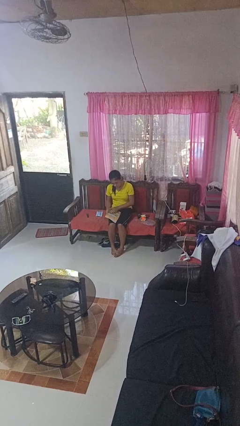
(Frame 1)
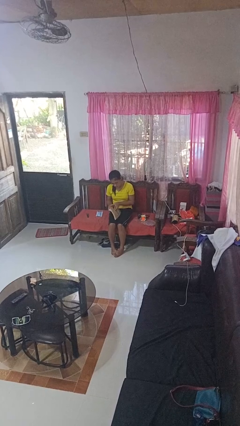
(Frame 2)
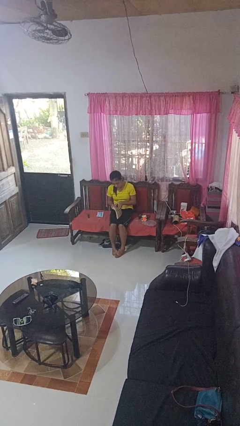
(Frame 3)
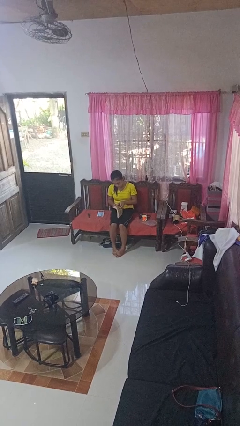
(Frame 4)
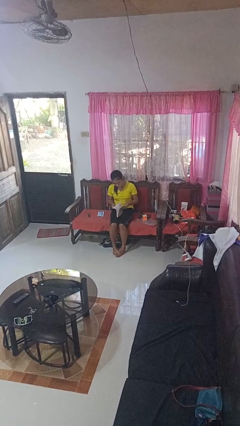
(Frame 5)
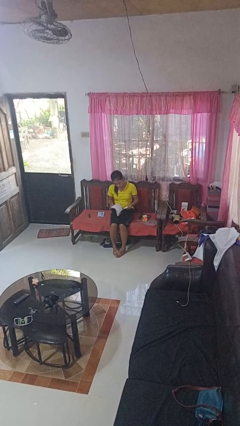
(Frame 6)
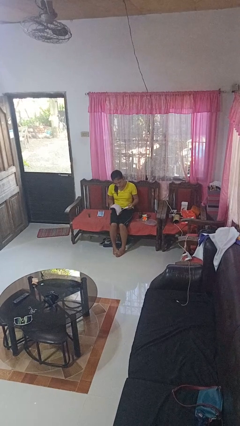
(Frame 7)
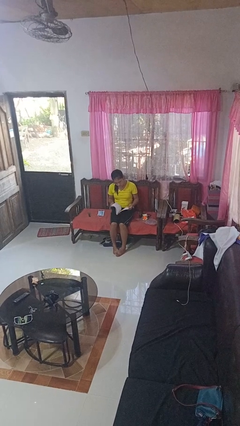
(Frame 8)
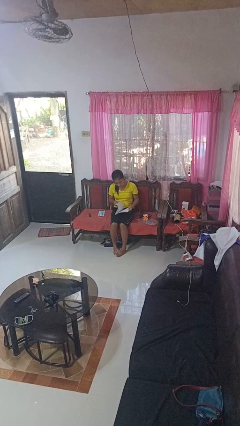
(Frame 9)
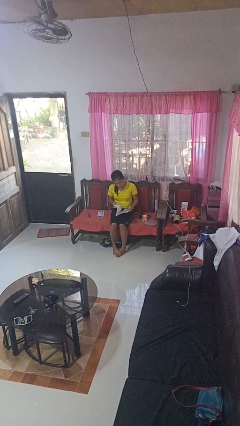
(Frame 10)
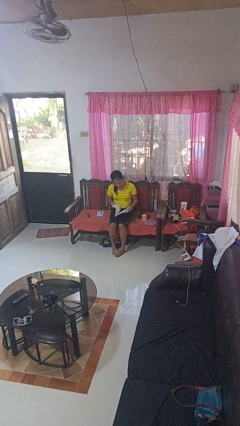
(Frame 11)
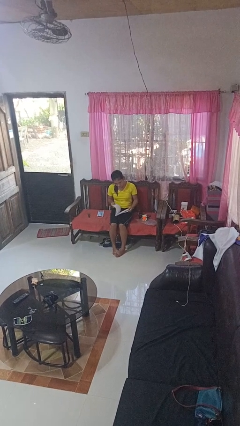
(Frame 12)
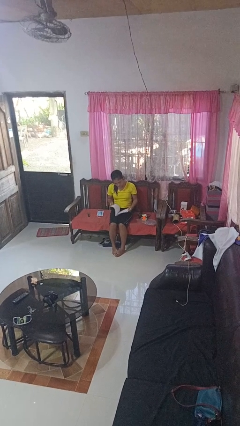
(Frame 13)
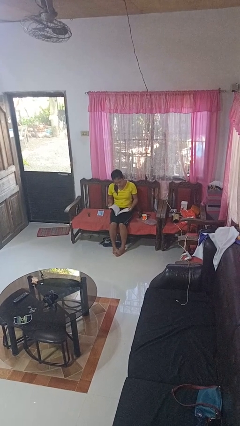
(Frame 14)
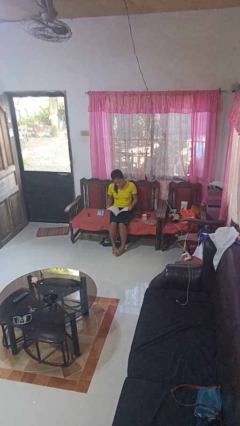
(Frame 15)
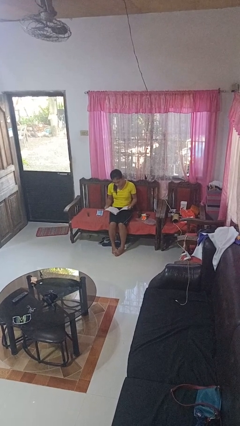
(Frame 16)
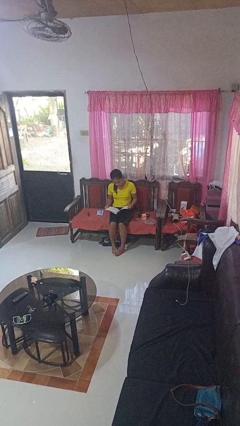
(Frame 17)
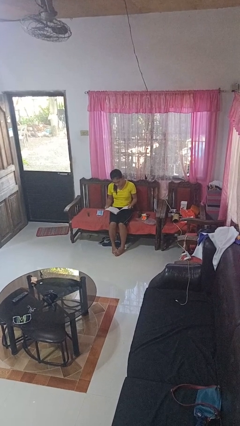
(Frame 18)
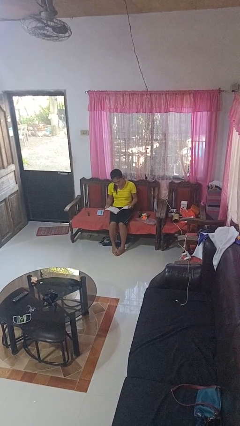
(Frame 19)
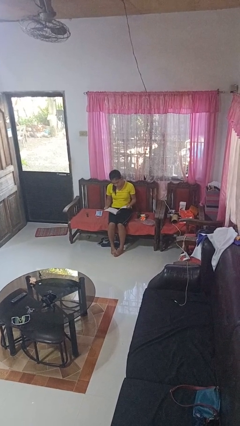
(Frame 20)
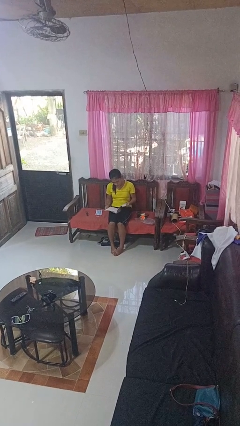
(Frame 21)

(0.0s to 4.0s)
person reads book

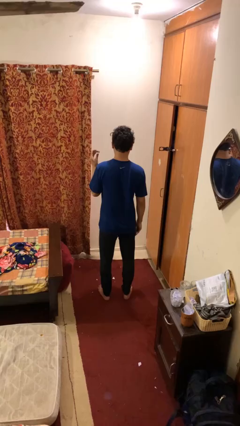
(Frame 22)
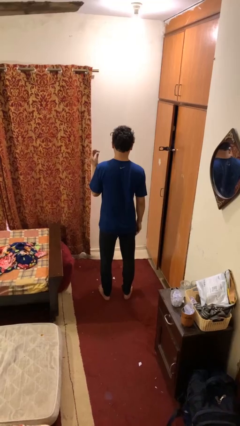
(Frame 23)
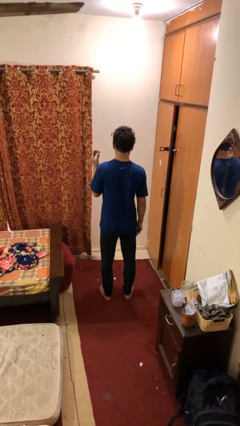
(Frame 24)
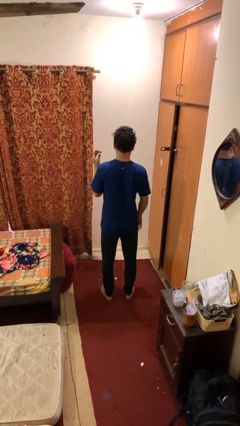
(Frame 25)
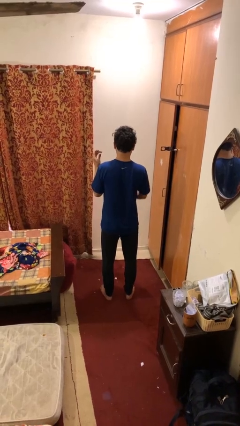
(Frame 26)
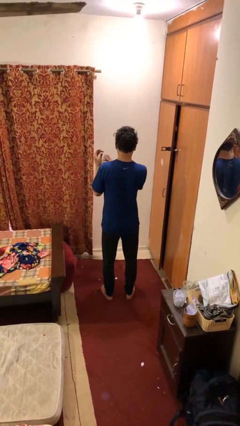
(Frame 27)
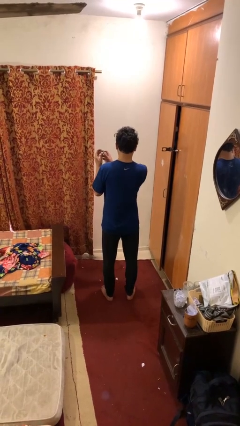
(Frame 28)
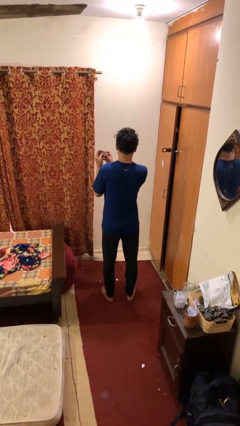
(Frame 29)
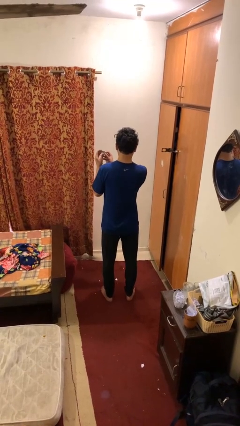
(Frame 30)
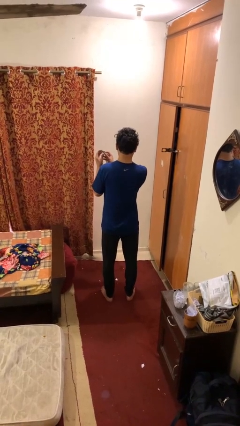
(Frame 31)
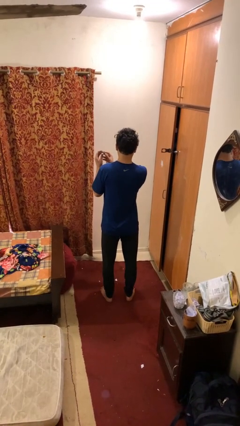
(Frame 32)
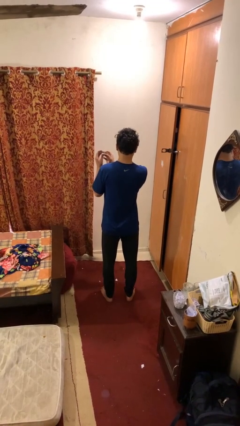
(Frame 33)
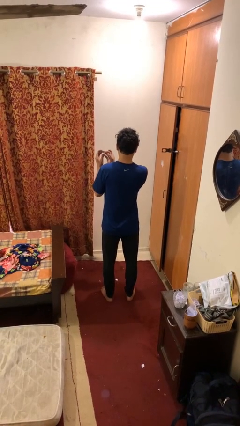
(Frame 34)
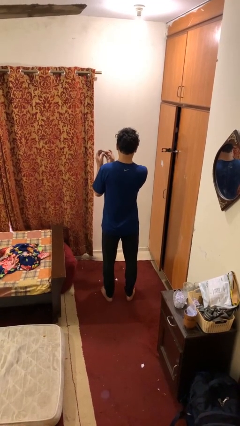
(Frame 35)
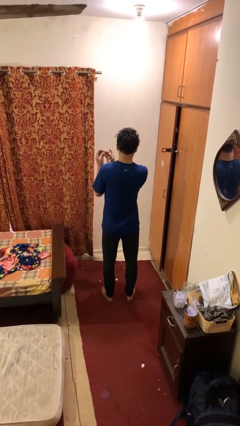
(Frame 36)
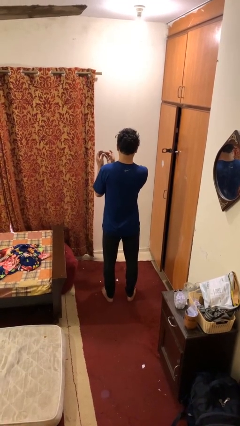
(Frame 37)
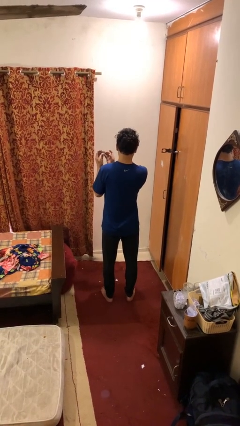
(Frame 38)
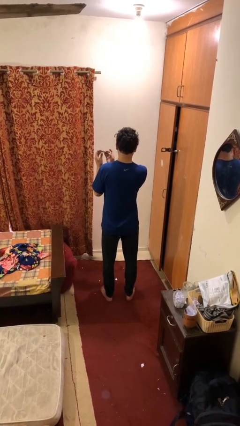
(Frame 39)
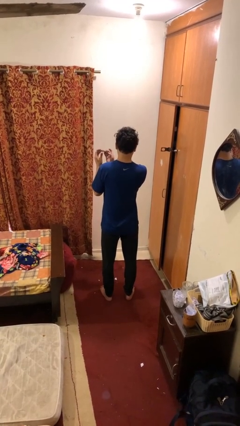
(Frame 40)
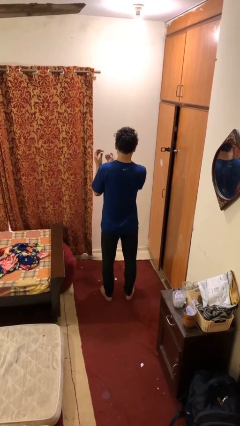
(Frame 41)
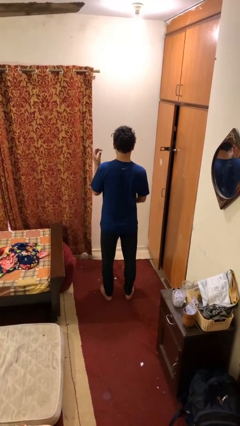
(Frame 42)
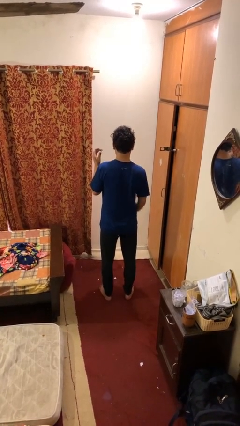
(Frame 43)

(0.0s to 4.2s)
person clips fingernails

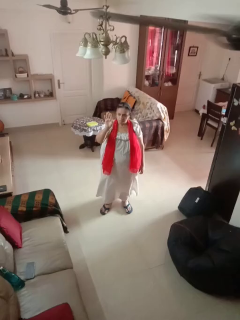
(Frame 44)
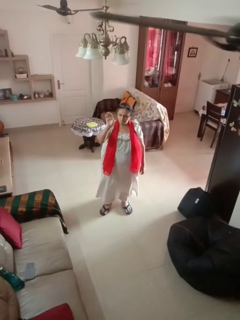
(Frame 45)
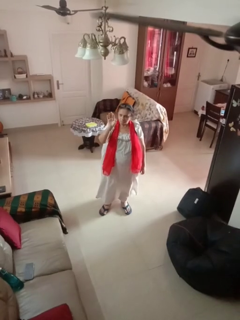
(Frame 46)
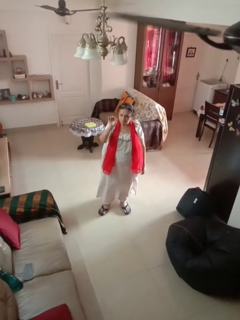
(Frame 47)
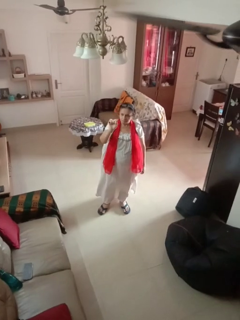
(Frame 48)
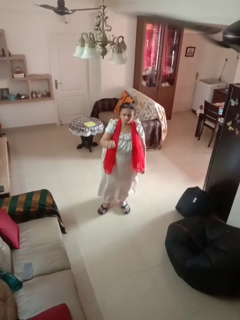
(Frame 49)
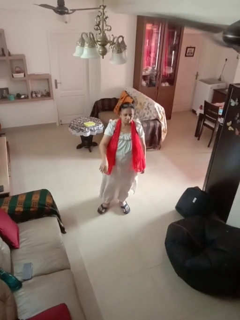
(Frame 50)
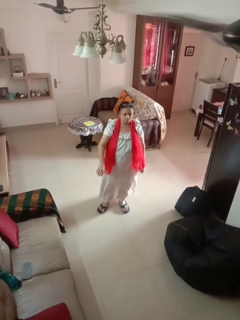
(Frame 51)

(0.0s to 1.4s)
person gestures come here

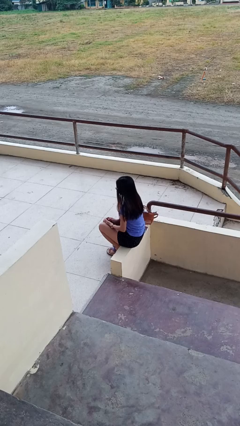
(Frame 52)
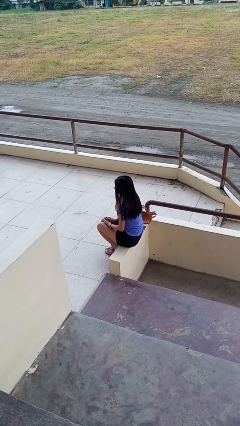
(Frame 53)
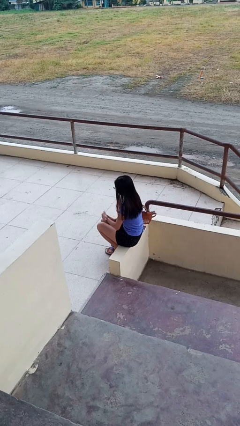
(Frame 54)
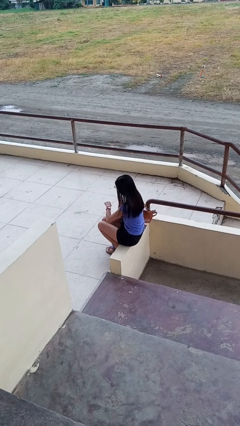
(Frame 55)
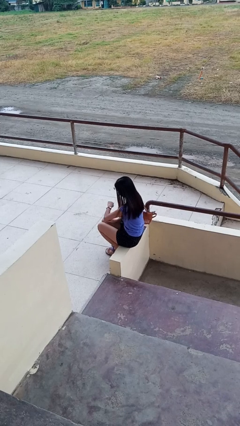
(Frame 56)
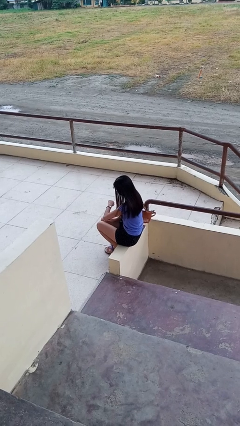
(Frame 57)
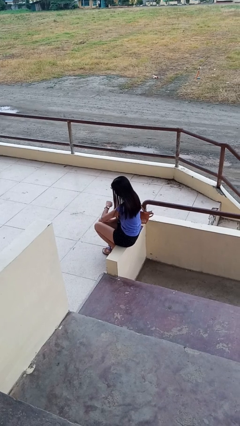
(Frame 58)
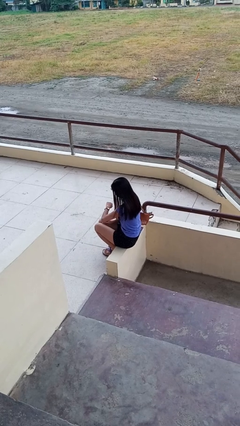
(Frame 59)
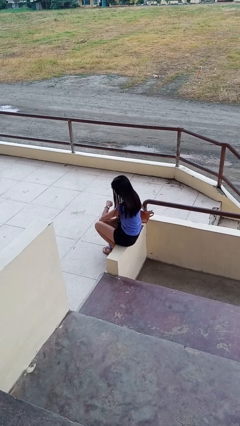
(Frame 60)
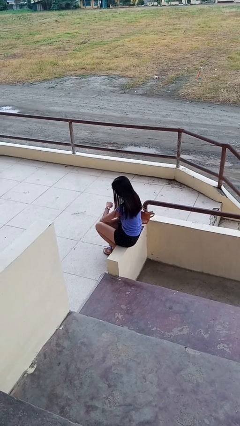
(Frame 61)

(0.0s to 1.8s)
person looks at wristwatch

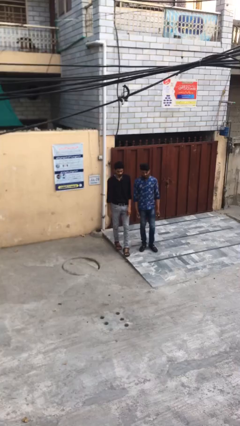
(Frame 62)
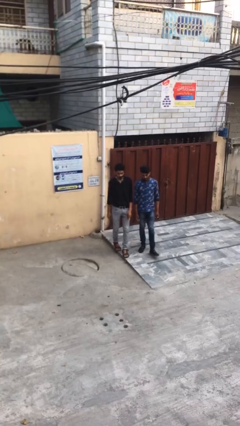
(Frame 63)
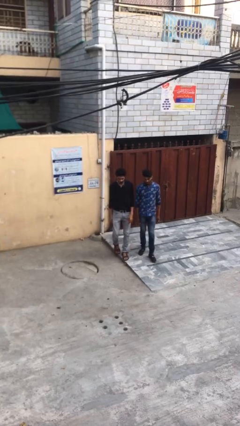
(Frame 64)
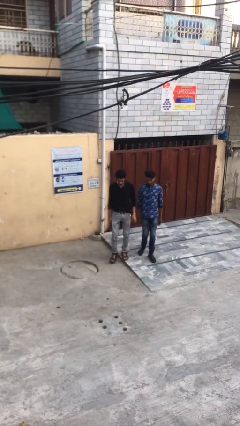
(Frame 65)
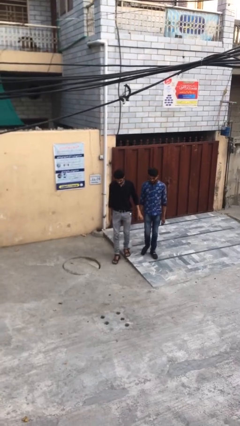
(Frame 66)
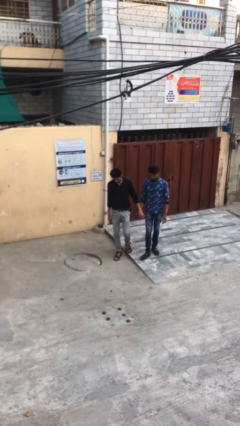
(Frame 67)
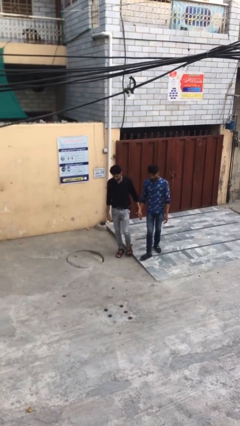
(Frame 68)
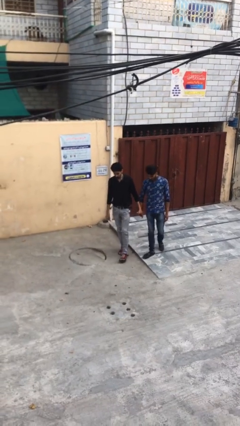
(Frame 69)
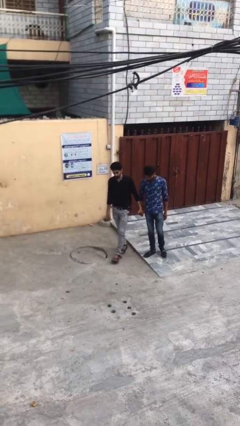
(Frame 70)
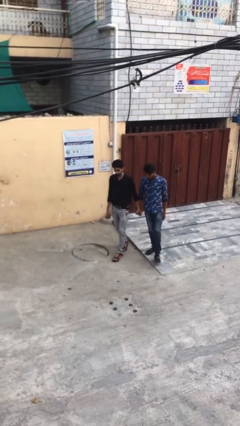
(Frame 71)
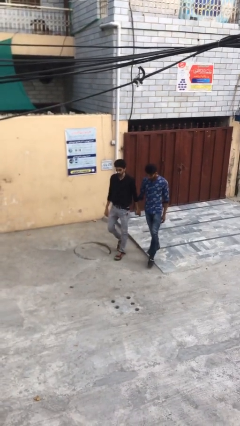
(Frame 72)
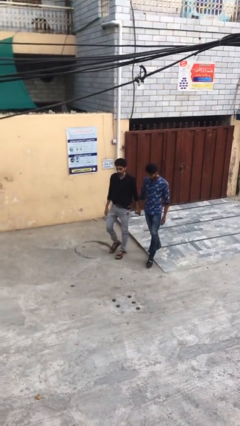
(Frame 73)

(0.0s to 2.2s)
person holds hand

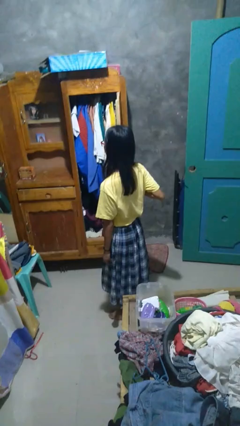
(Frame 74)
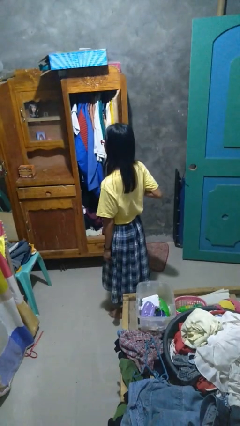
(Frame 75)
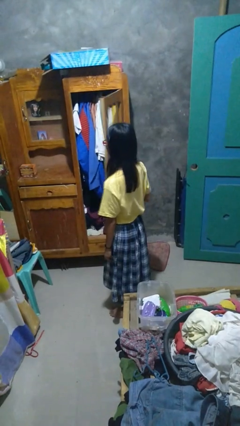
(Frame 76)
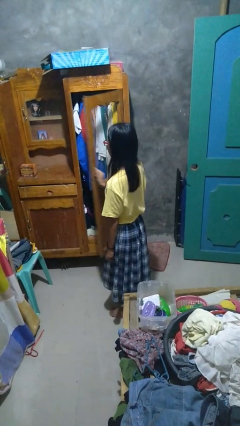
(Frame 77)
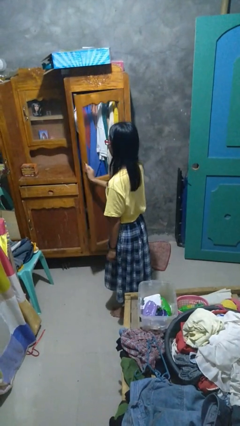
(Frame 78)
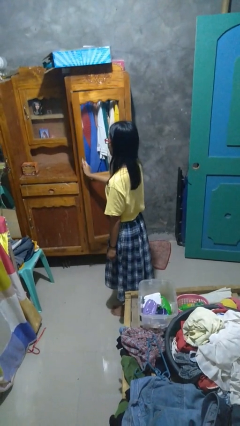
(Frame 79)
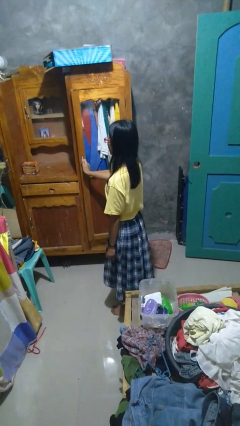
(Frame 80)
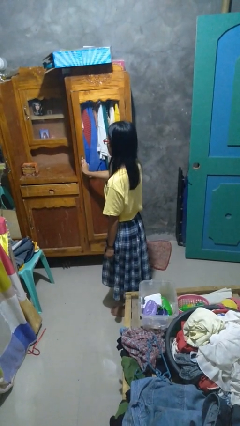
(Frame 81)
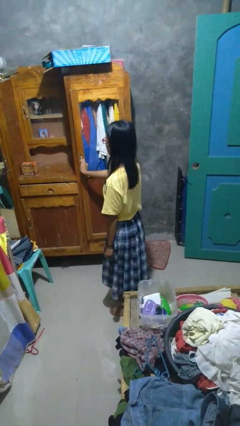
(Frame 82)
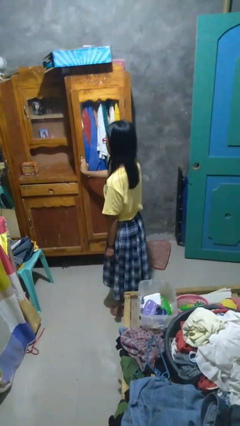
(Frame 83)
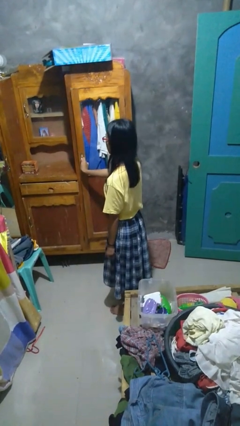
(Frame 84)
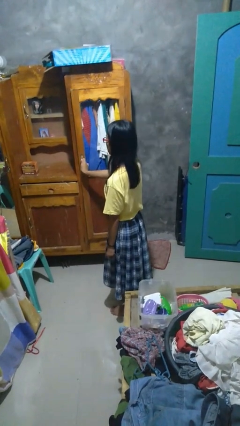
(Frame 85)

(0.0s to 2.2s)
person closes closet door

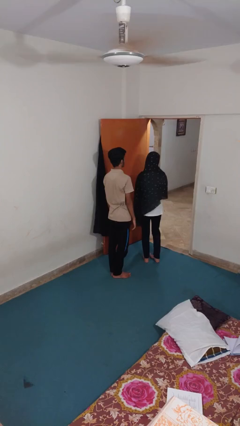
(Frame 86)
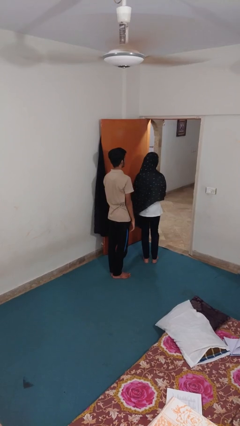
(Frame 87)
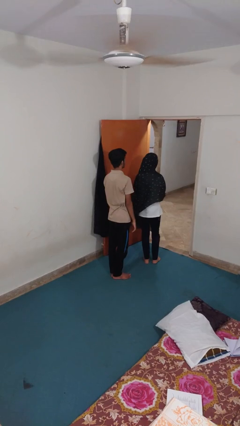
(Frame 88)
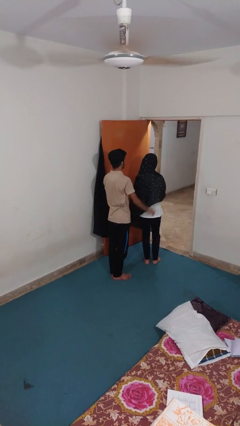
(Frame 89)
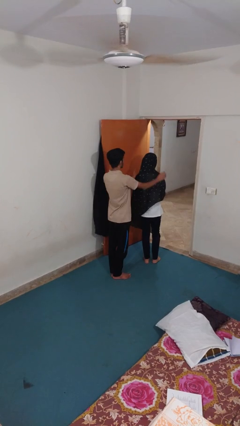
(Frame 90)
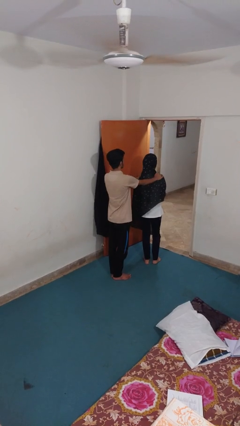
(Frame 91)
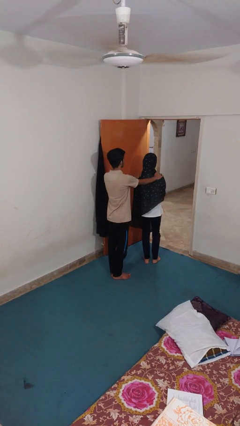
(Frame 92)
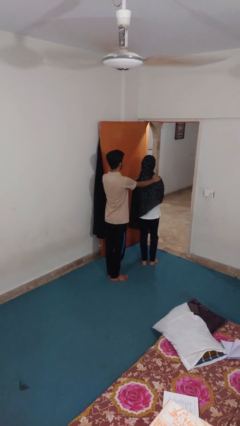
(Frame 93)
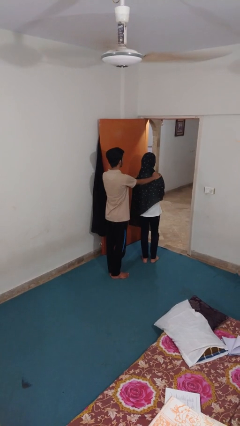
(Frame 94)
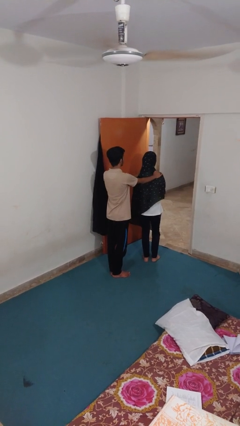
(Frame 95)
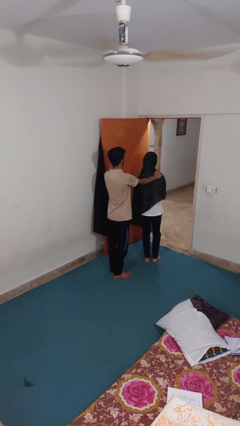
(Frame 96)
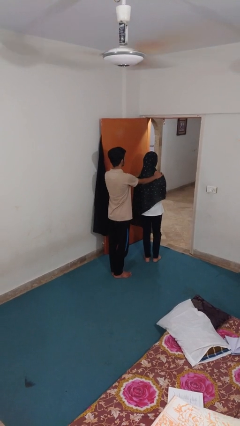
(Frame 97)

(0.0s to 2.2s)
person grabs person by shoulder
